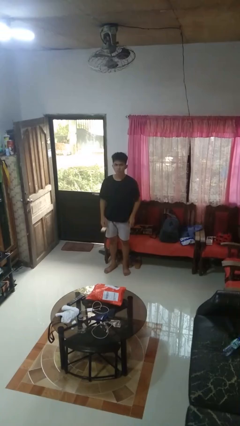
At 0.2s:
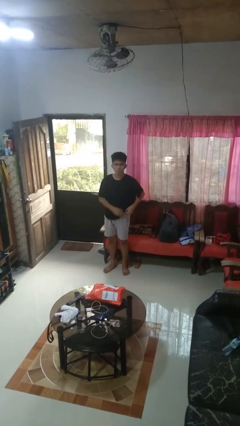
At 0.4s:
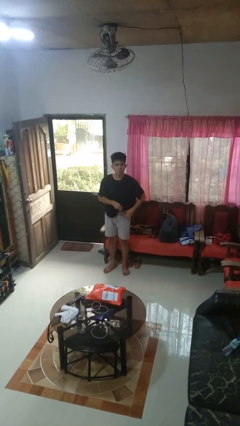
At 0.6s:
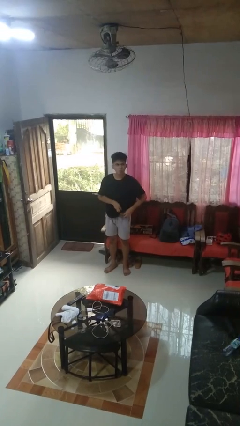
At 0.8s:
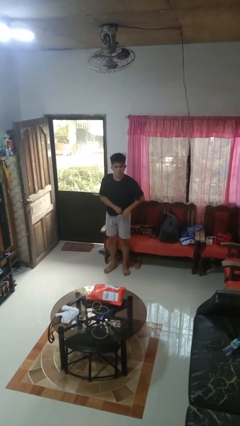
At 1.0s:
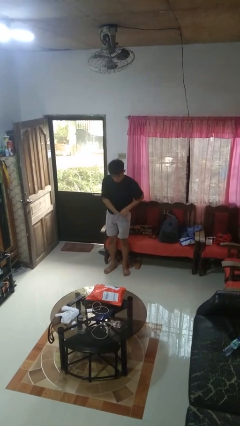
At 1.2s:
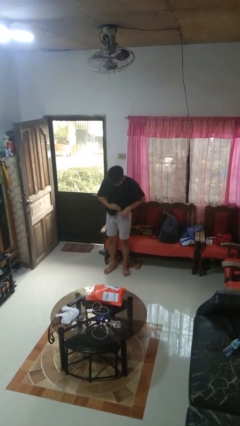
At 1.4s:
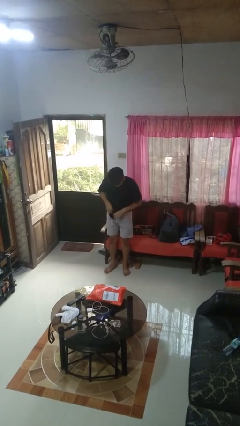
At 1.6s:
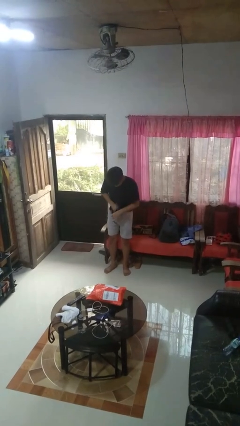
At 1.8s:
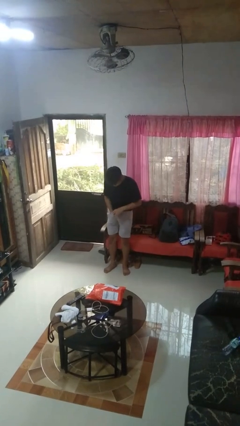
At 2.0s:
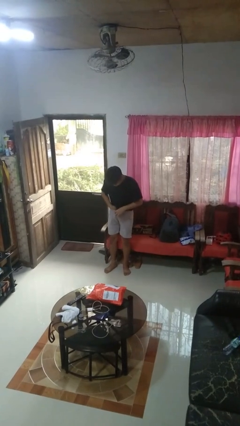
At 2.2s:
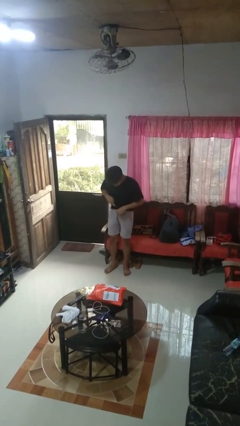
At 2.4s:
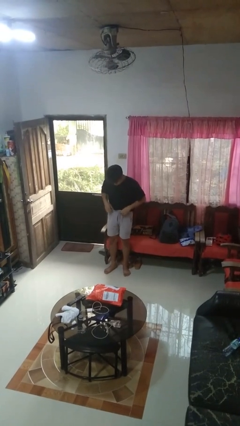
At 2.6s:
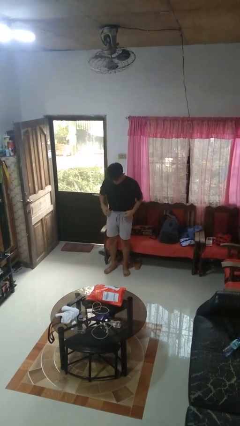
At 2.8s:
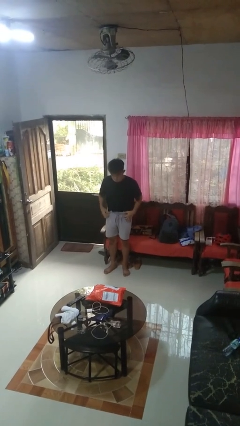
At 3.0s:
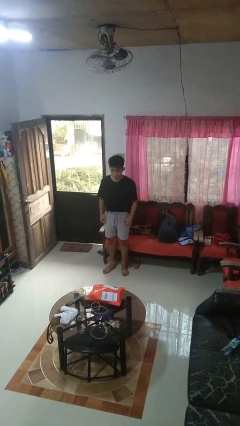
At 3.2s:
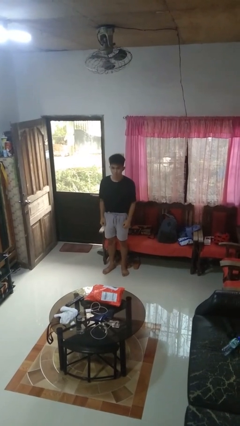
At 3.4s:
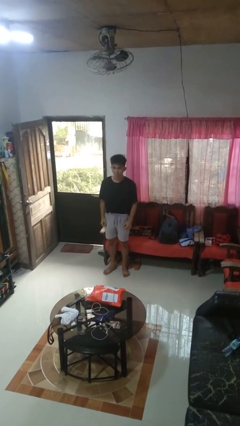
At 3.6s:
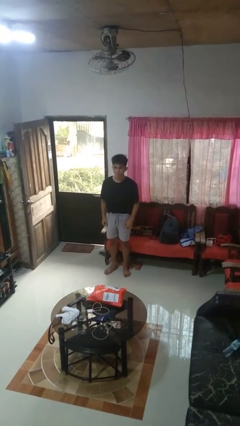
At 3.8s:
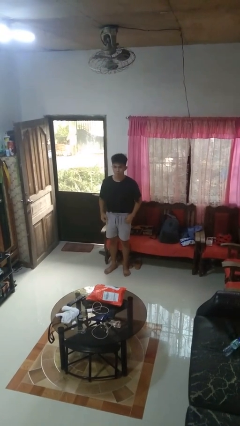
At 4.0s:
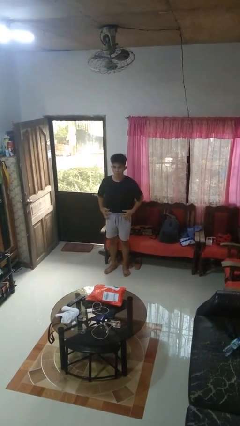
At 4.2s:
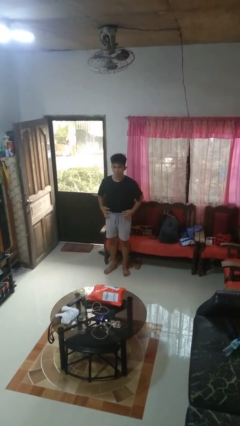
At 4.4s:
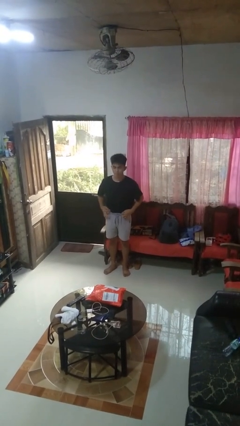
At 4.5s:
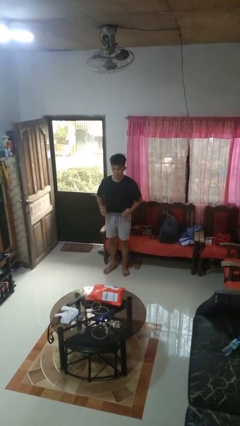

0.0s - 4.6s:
person tucks in shirt

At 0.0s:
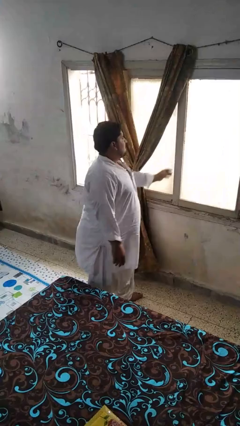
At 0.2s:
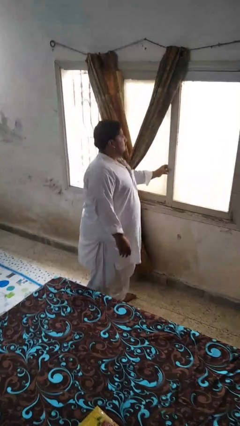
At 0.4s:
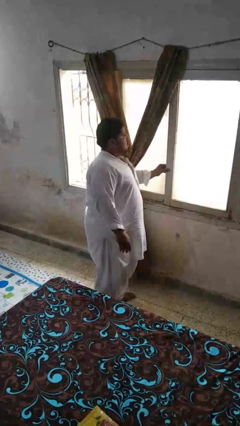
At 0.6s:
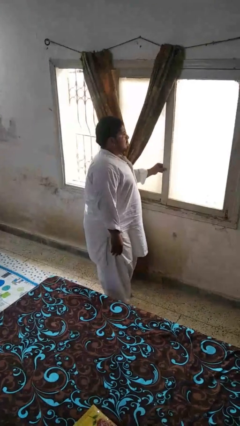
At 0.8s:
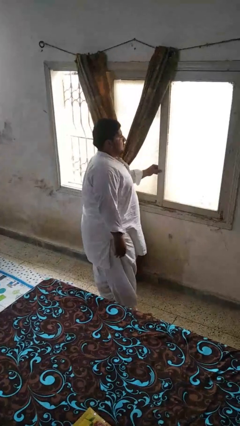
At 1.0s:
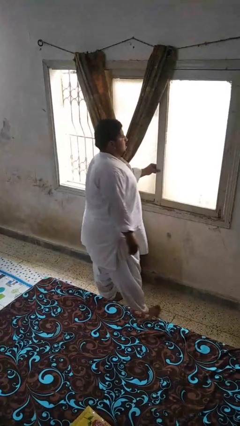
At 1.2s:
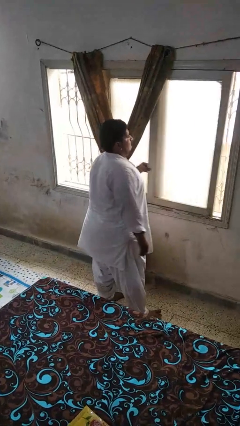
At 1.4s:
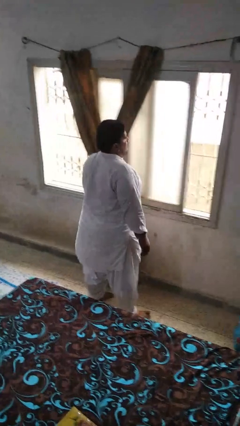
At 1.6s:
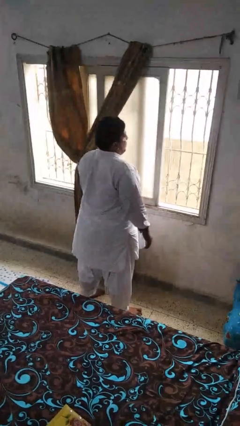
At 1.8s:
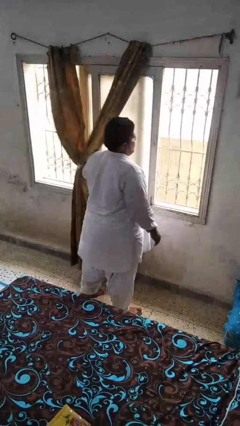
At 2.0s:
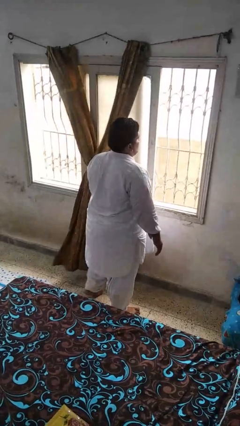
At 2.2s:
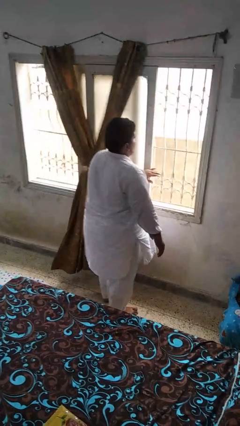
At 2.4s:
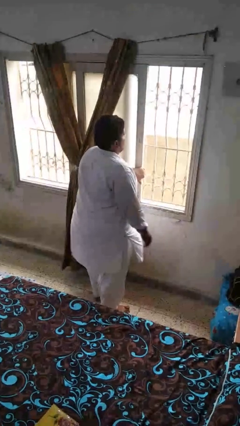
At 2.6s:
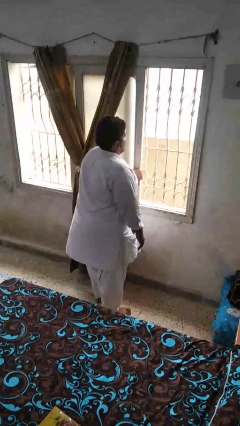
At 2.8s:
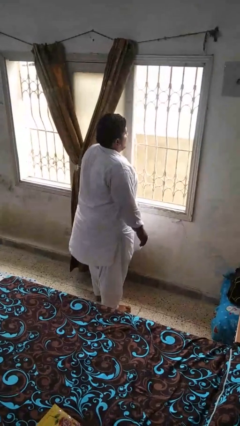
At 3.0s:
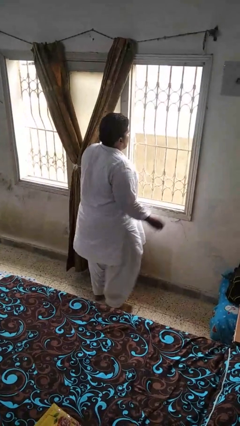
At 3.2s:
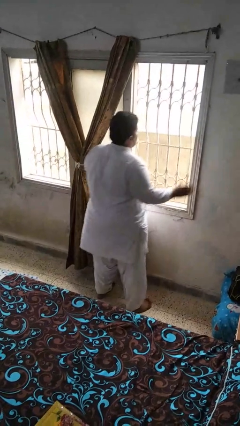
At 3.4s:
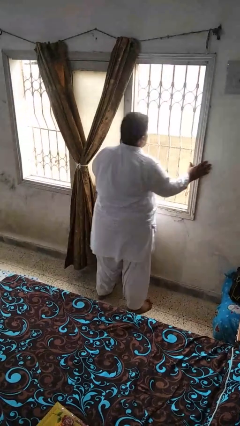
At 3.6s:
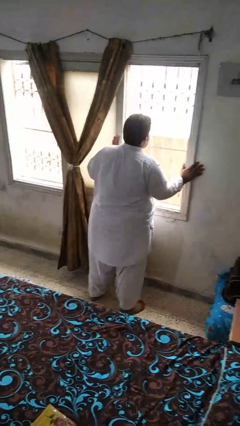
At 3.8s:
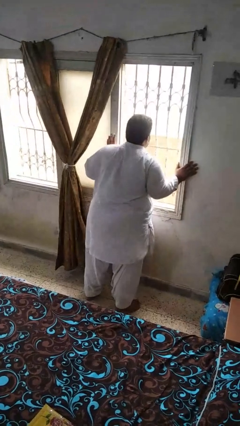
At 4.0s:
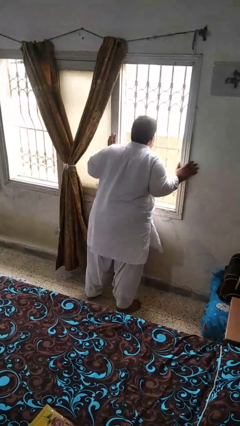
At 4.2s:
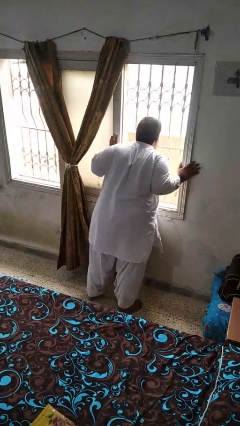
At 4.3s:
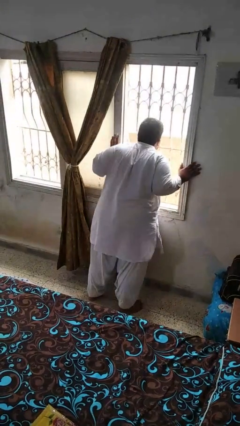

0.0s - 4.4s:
person opens home window

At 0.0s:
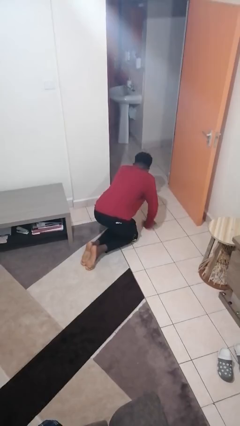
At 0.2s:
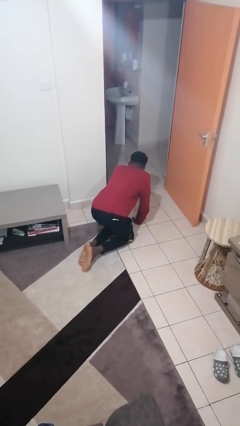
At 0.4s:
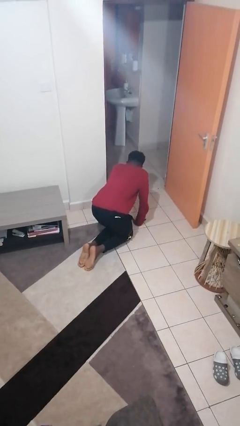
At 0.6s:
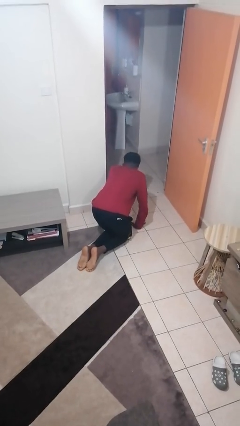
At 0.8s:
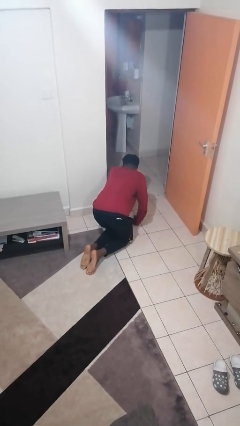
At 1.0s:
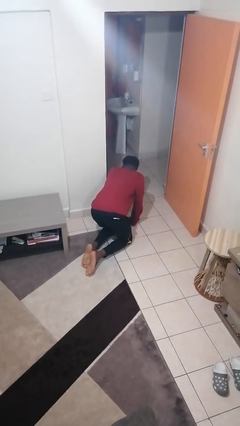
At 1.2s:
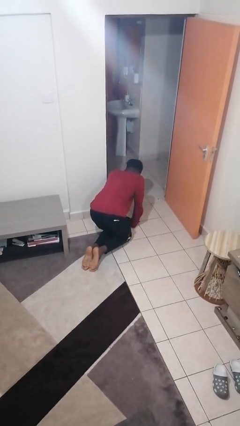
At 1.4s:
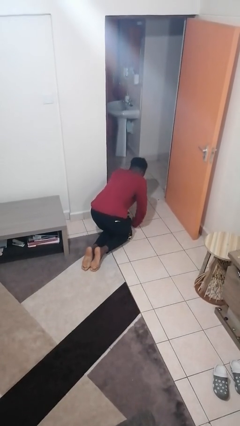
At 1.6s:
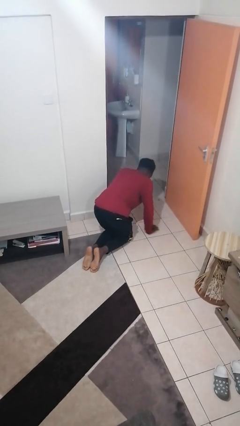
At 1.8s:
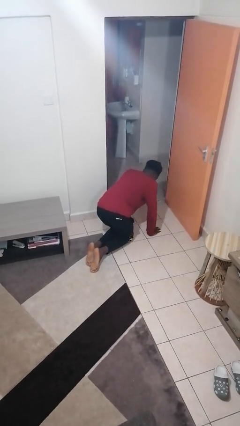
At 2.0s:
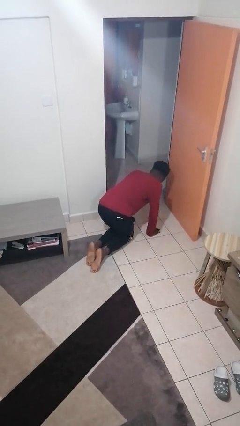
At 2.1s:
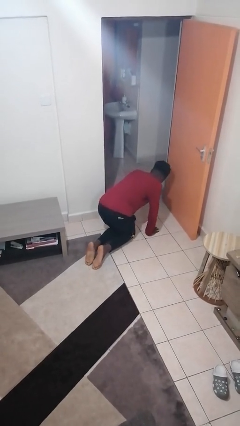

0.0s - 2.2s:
person crawls

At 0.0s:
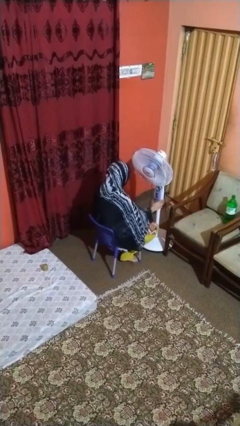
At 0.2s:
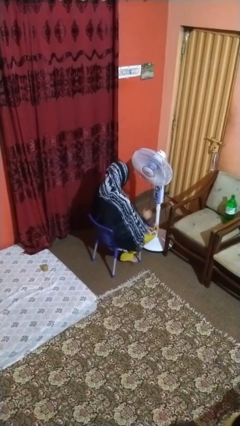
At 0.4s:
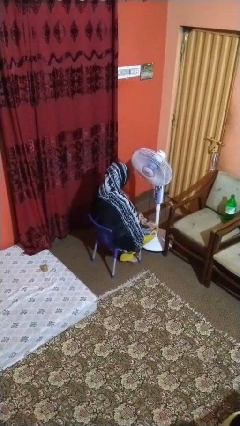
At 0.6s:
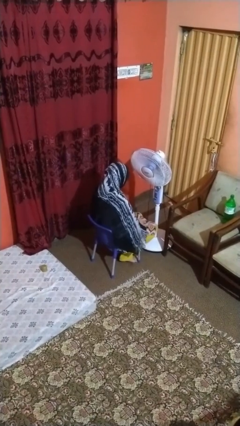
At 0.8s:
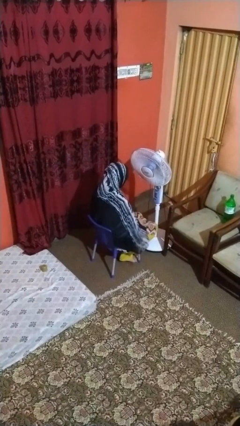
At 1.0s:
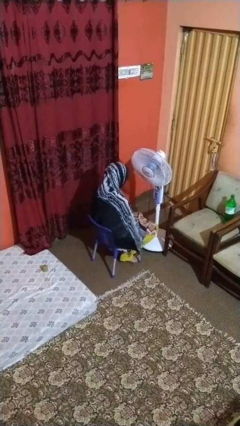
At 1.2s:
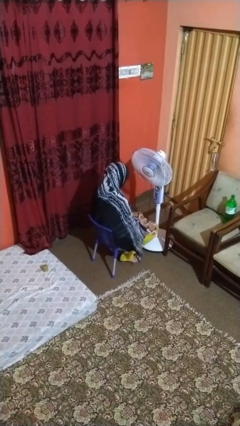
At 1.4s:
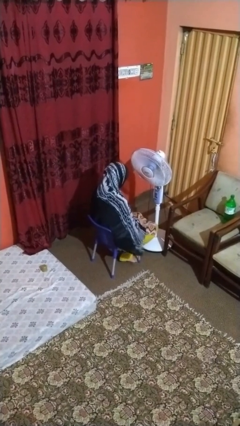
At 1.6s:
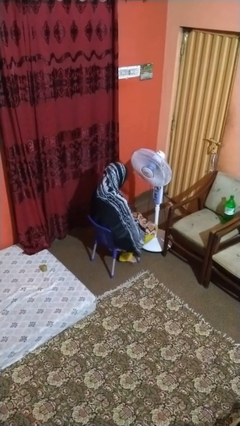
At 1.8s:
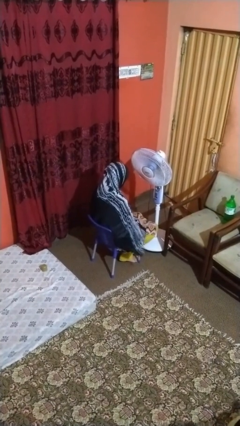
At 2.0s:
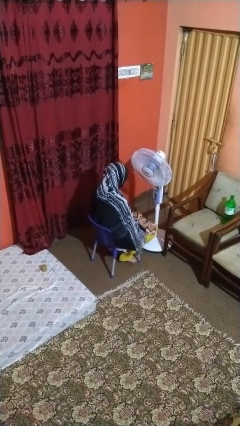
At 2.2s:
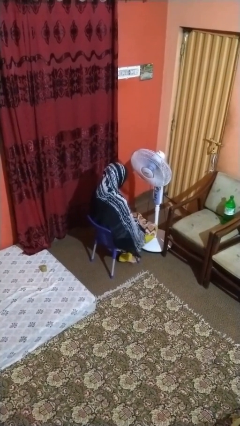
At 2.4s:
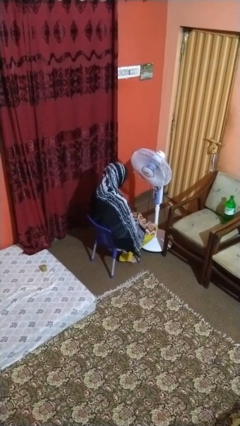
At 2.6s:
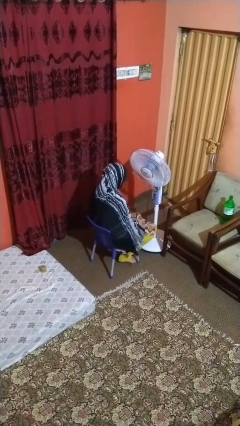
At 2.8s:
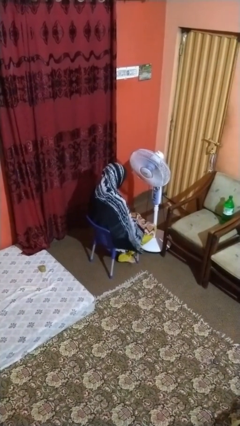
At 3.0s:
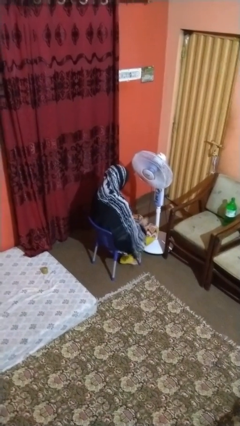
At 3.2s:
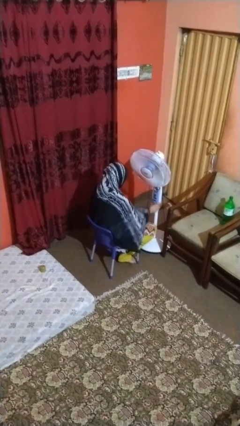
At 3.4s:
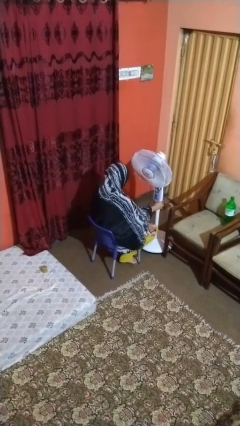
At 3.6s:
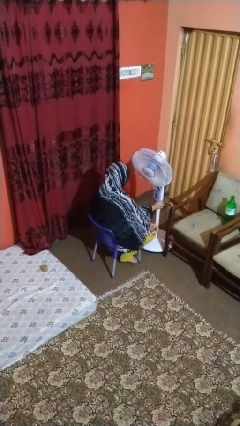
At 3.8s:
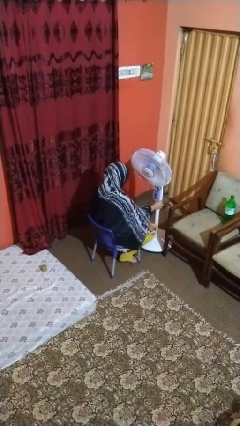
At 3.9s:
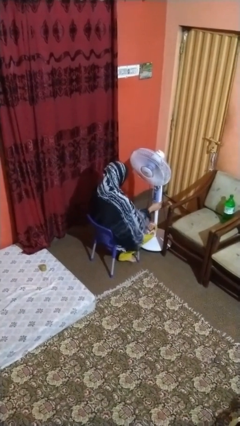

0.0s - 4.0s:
person turns on fan

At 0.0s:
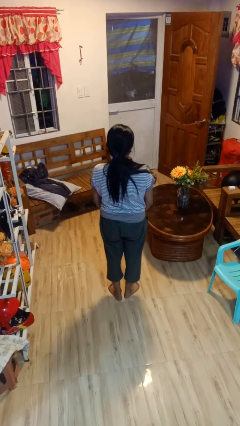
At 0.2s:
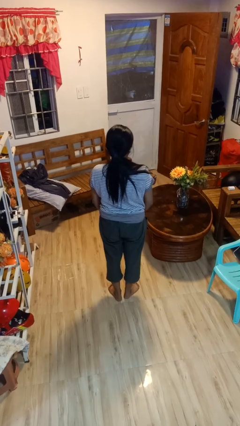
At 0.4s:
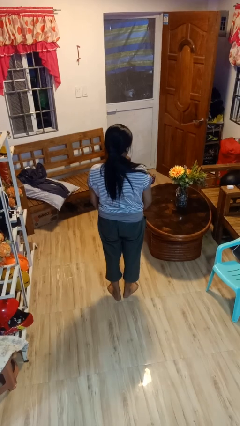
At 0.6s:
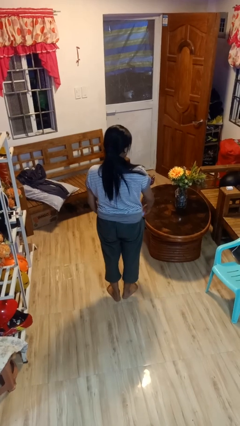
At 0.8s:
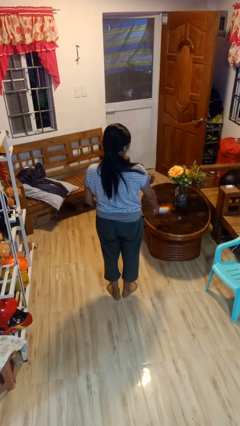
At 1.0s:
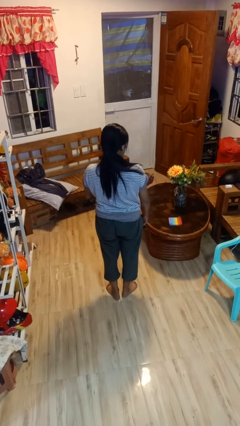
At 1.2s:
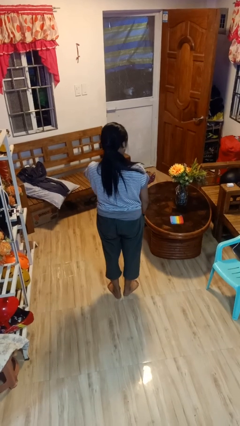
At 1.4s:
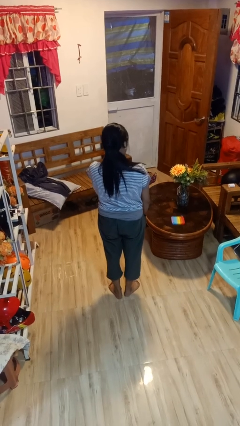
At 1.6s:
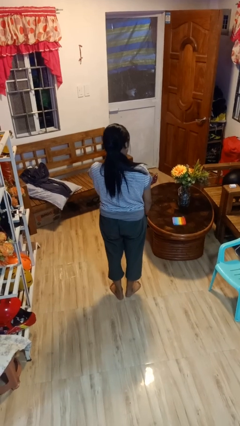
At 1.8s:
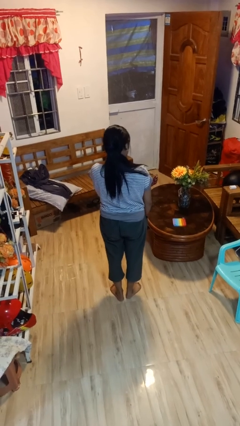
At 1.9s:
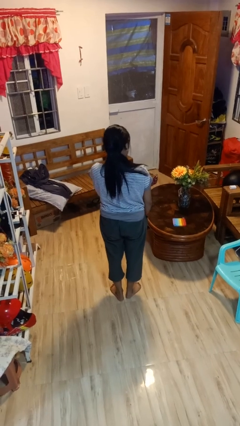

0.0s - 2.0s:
person throws object on table

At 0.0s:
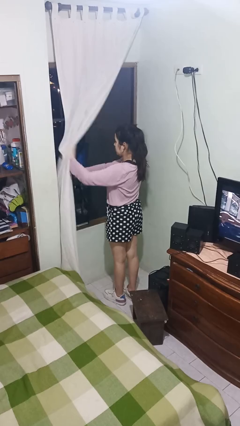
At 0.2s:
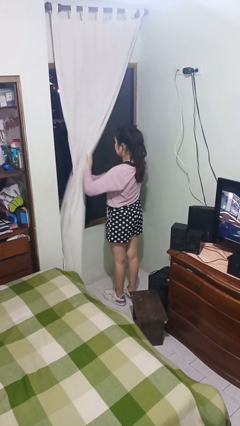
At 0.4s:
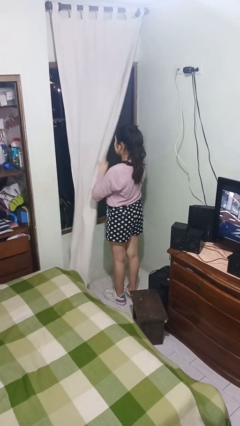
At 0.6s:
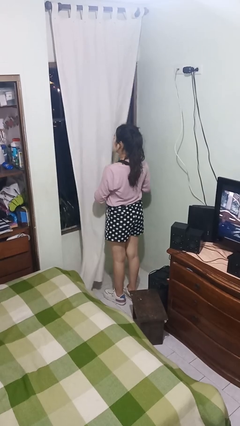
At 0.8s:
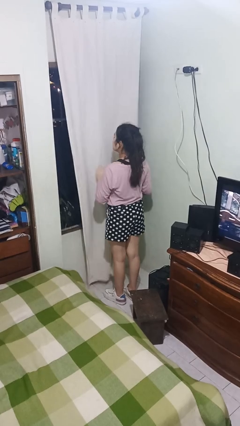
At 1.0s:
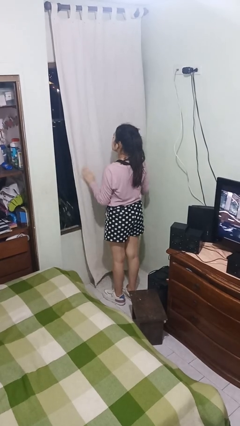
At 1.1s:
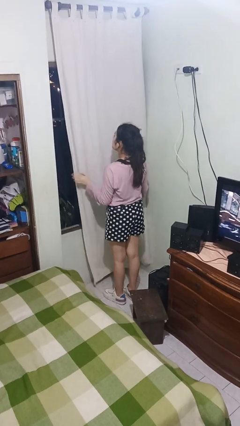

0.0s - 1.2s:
person closes curtains
